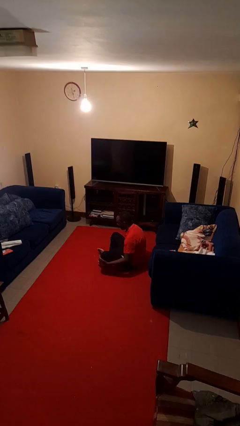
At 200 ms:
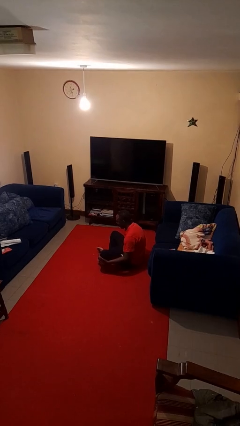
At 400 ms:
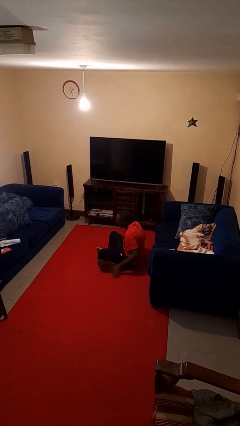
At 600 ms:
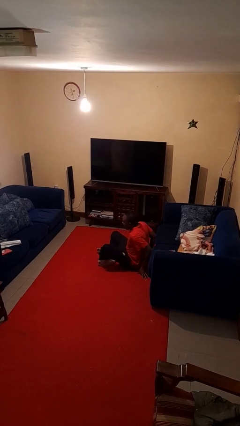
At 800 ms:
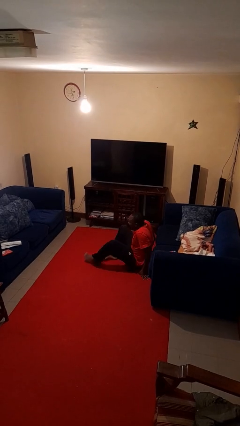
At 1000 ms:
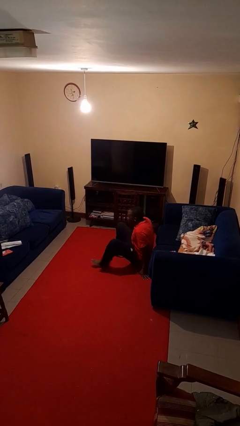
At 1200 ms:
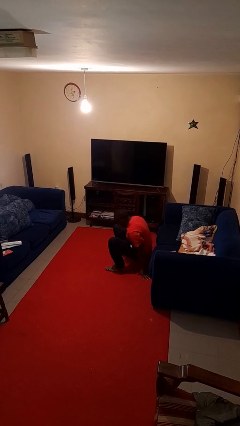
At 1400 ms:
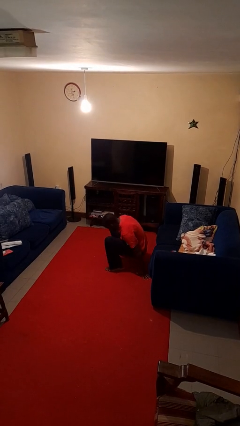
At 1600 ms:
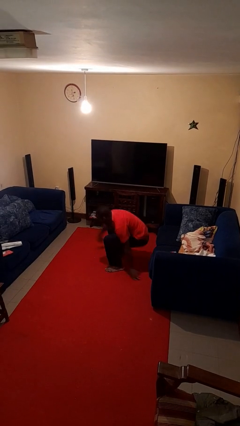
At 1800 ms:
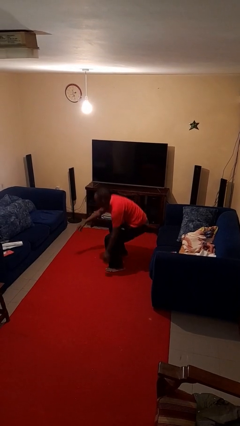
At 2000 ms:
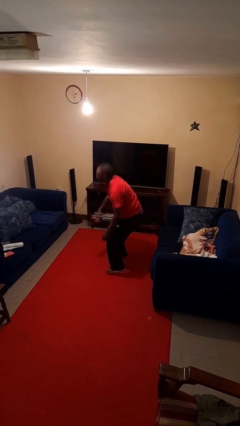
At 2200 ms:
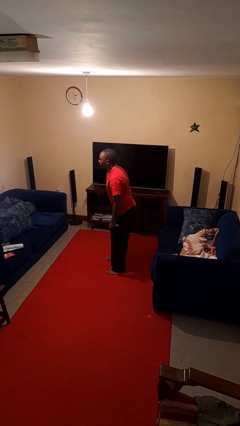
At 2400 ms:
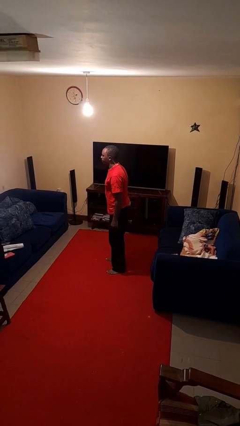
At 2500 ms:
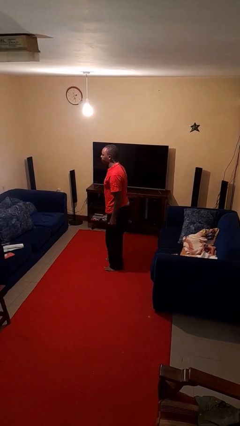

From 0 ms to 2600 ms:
person stands up from floor

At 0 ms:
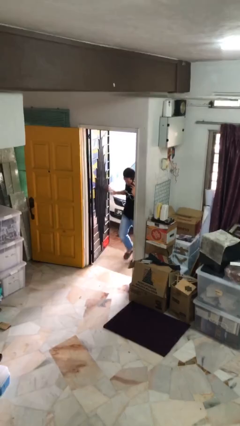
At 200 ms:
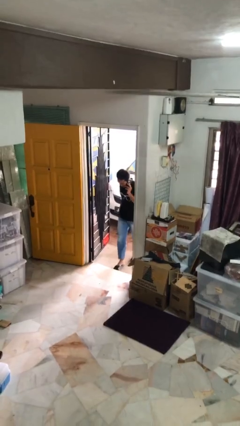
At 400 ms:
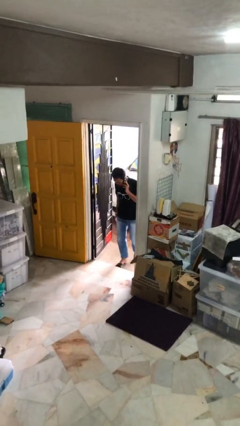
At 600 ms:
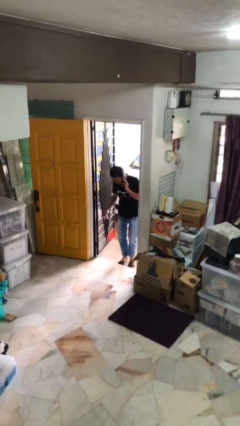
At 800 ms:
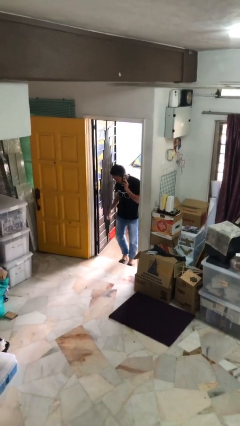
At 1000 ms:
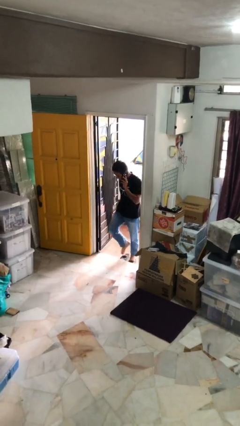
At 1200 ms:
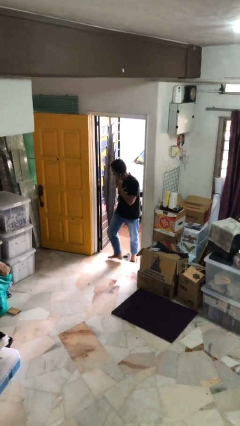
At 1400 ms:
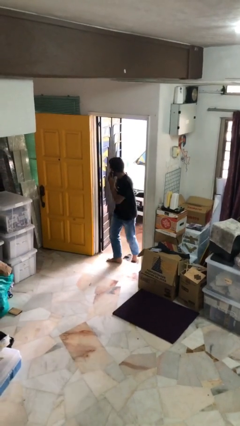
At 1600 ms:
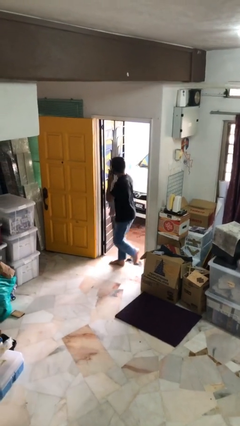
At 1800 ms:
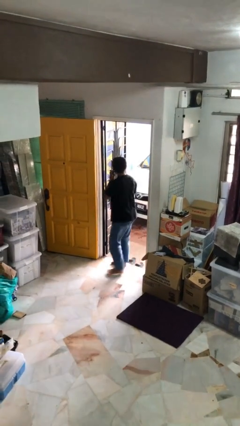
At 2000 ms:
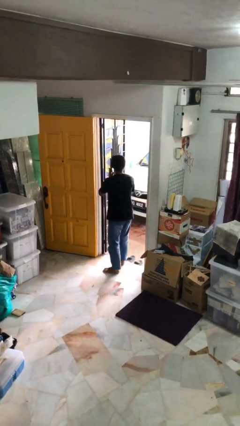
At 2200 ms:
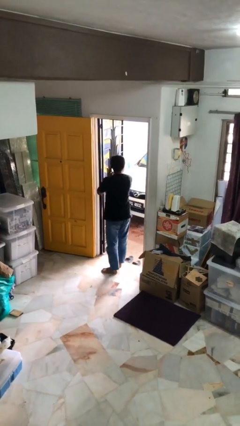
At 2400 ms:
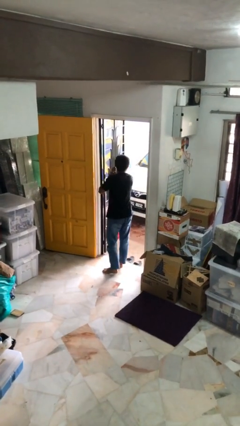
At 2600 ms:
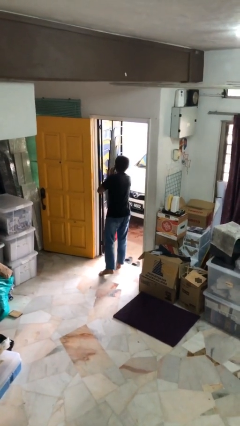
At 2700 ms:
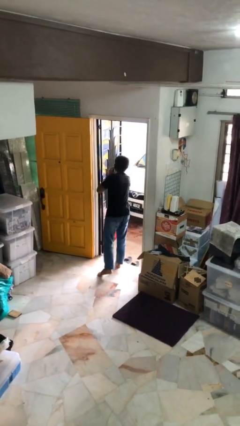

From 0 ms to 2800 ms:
person enters scene through structure

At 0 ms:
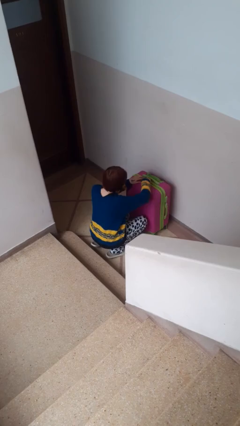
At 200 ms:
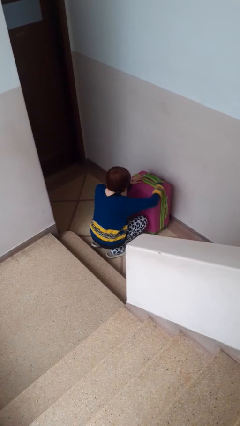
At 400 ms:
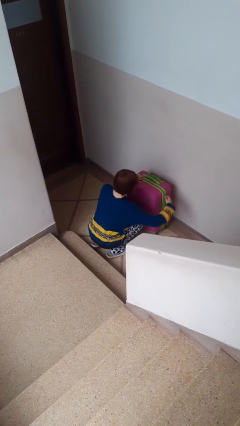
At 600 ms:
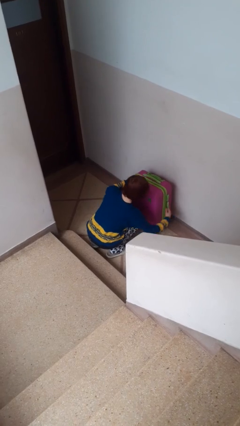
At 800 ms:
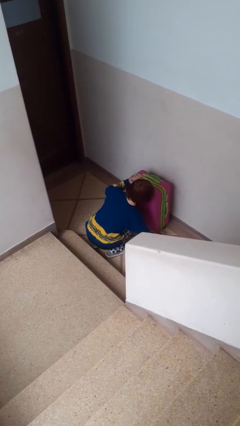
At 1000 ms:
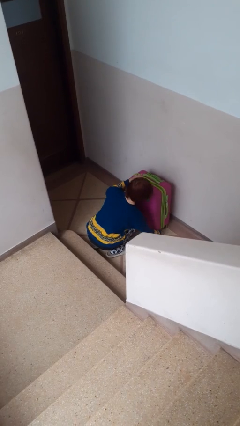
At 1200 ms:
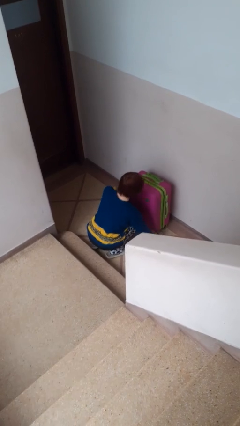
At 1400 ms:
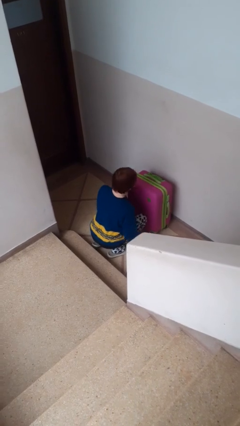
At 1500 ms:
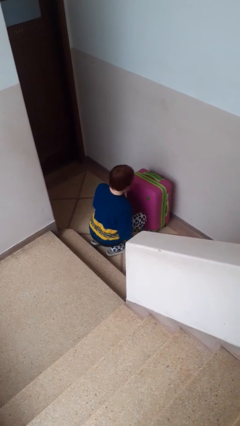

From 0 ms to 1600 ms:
person opens suitcase

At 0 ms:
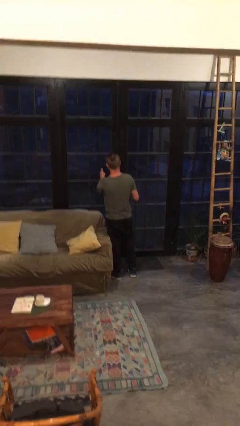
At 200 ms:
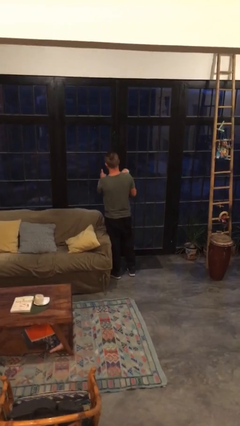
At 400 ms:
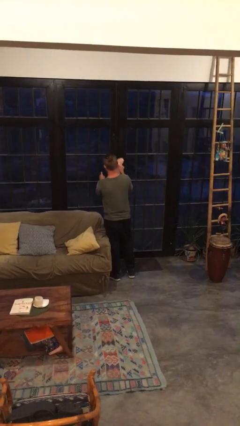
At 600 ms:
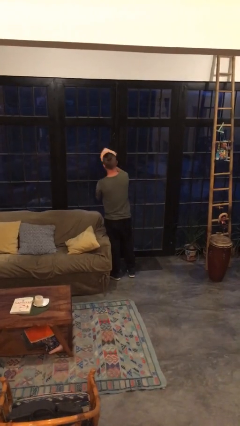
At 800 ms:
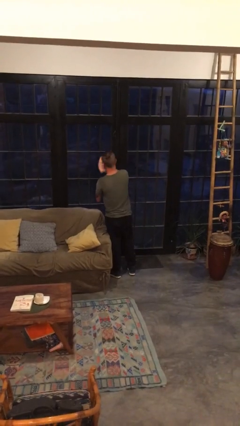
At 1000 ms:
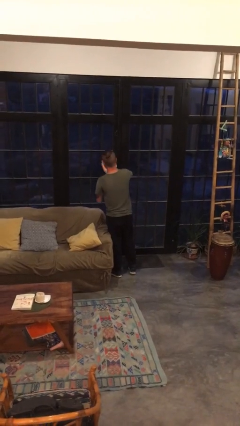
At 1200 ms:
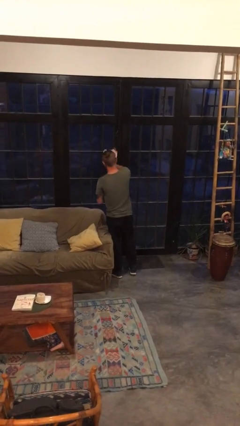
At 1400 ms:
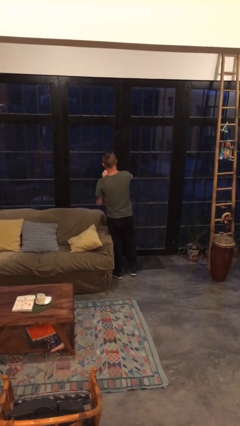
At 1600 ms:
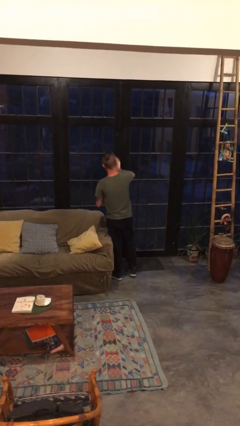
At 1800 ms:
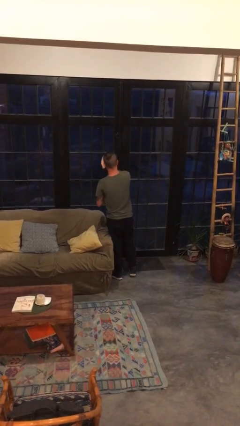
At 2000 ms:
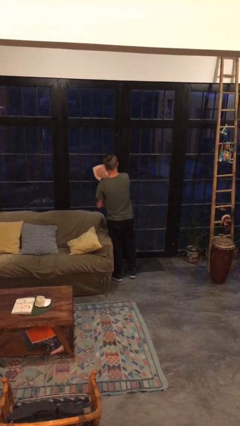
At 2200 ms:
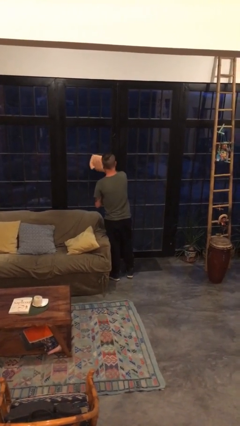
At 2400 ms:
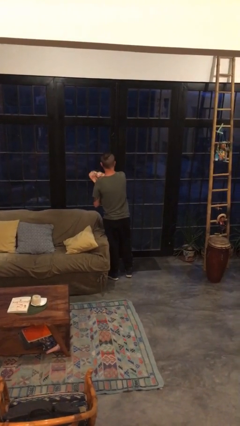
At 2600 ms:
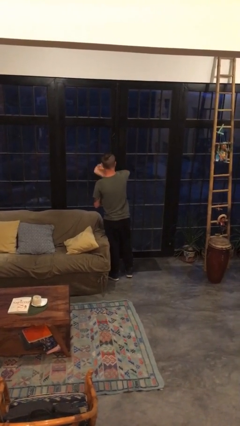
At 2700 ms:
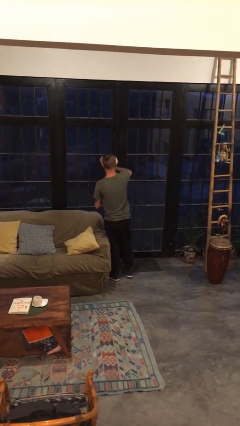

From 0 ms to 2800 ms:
person washes window

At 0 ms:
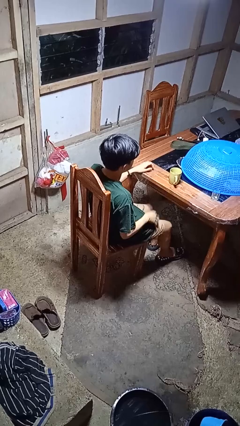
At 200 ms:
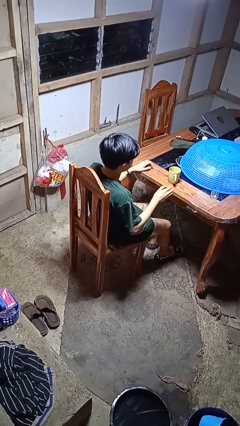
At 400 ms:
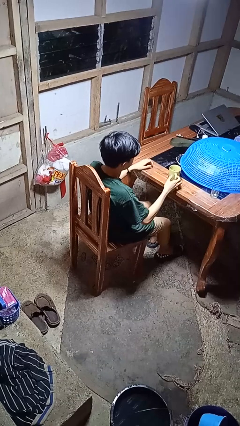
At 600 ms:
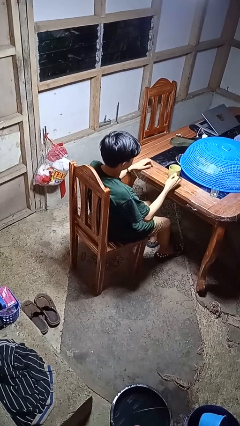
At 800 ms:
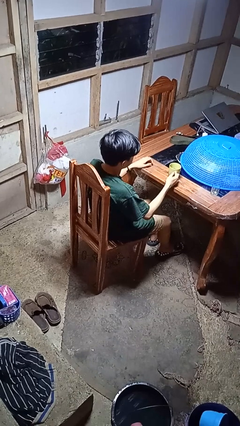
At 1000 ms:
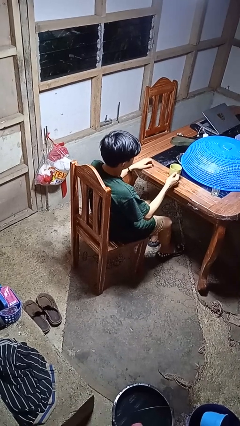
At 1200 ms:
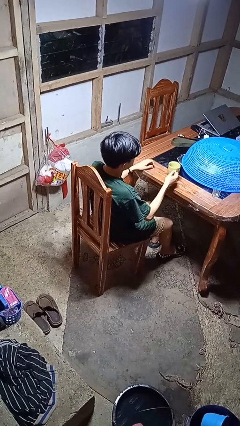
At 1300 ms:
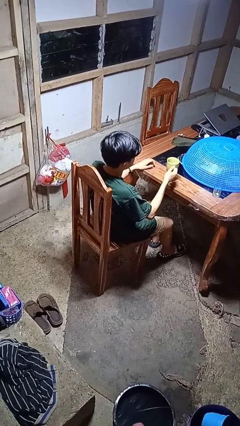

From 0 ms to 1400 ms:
person picks up object from table

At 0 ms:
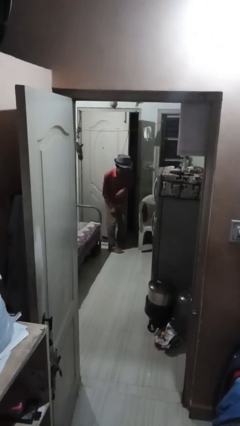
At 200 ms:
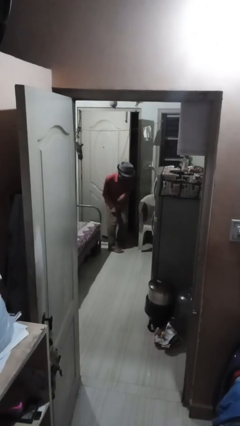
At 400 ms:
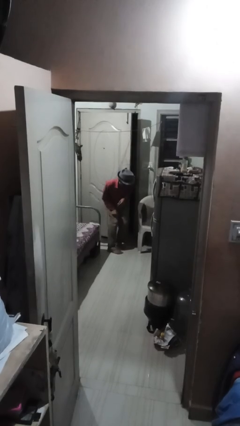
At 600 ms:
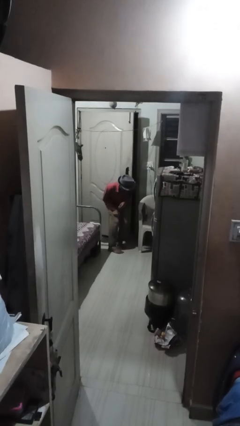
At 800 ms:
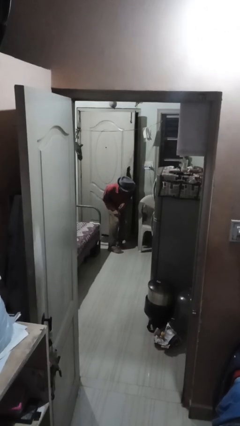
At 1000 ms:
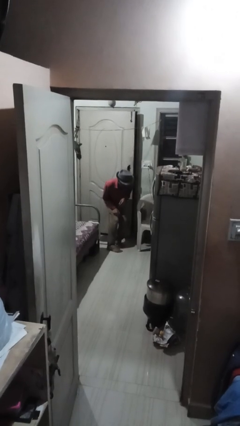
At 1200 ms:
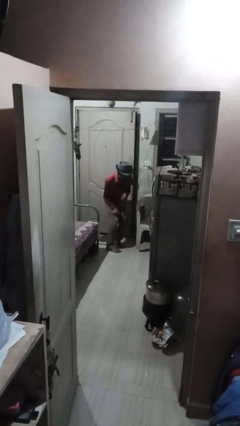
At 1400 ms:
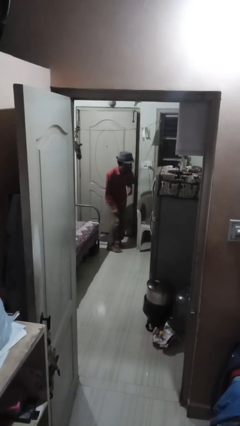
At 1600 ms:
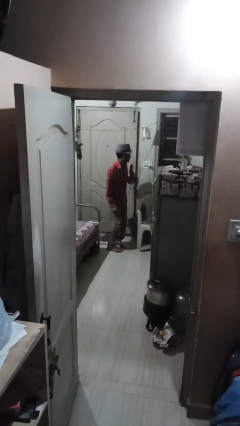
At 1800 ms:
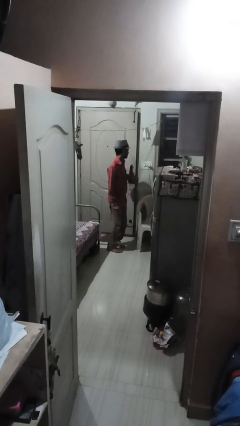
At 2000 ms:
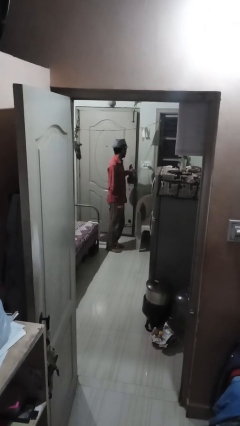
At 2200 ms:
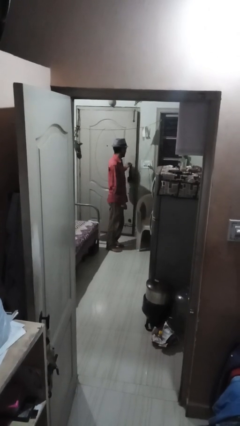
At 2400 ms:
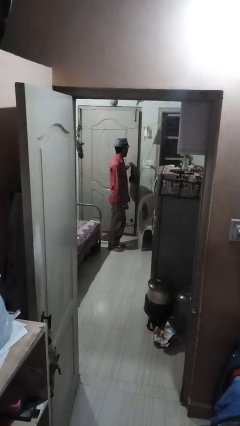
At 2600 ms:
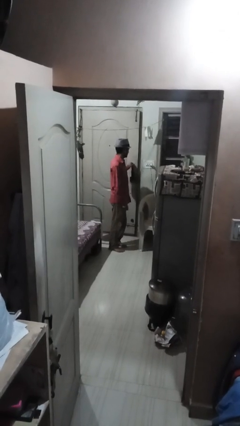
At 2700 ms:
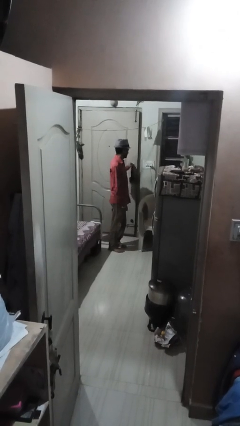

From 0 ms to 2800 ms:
person closes door with hip

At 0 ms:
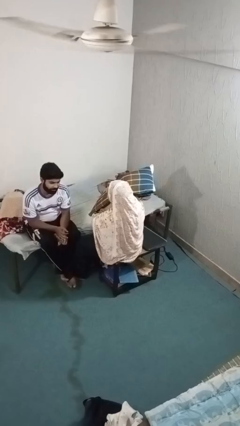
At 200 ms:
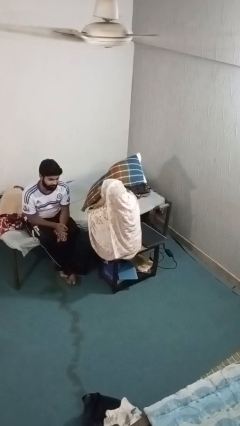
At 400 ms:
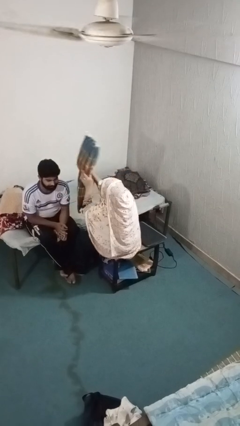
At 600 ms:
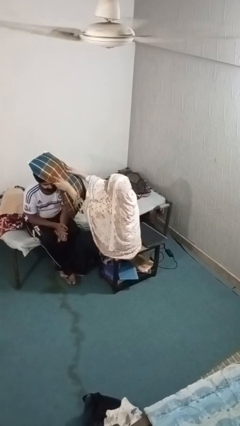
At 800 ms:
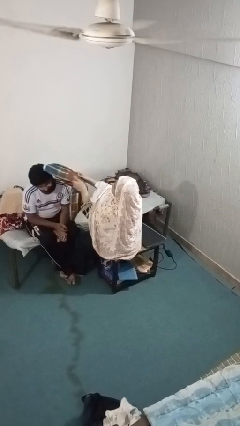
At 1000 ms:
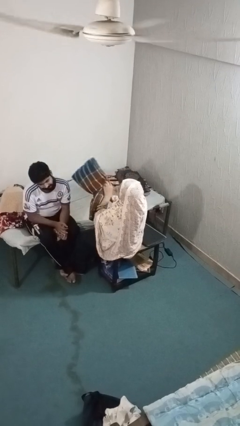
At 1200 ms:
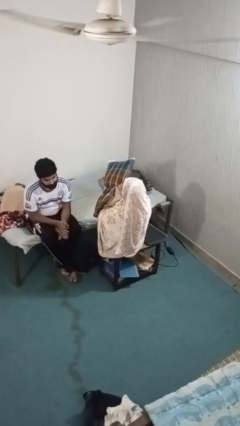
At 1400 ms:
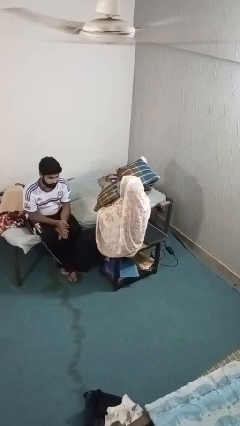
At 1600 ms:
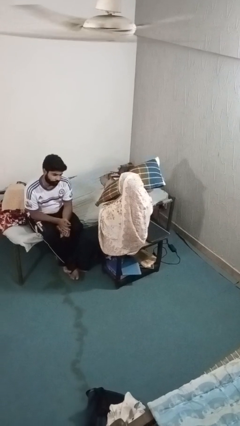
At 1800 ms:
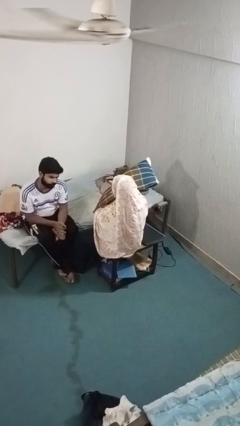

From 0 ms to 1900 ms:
person hits person with pillow

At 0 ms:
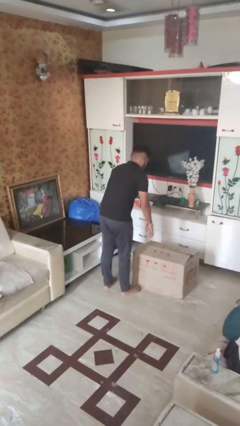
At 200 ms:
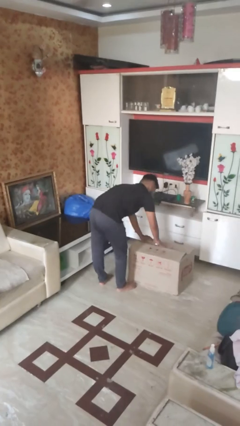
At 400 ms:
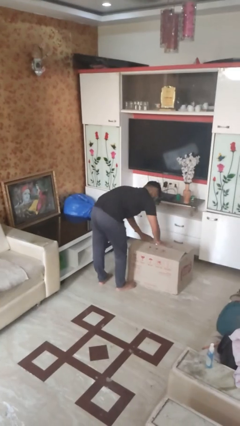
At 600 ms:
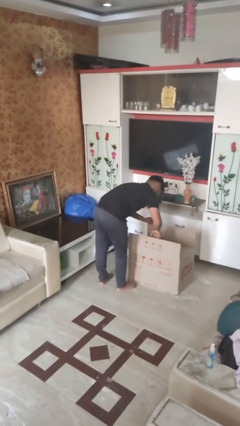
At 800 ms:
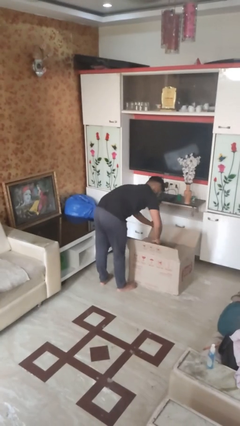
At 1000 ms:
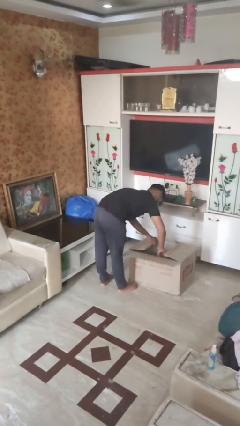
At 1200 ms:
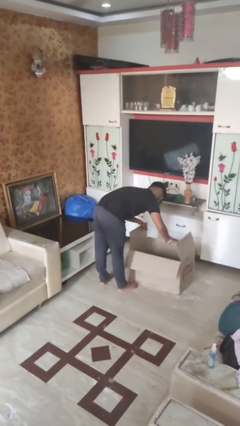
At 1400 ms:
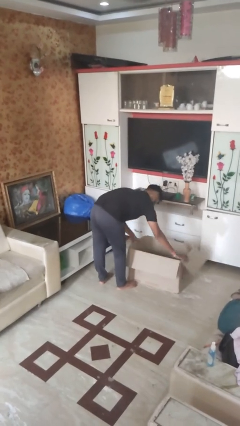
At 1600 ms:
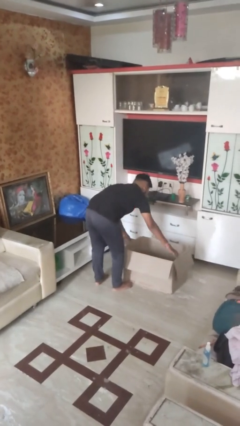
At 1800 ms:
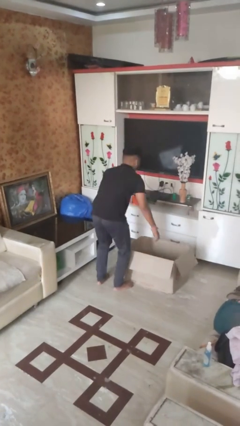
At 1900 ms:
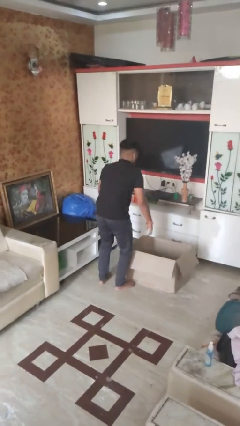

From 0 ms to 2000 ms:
person opens box
